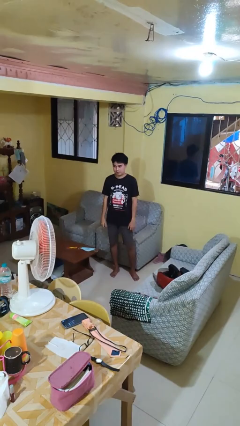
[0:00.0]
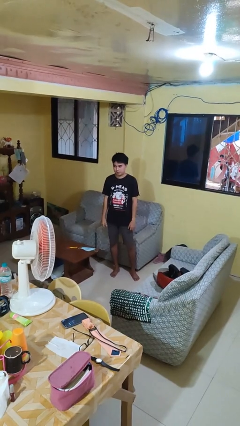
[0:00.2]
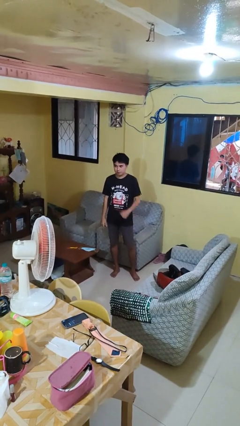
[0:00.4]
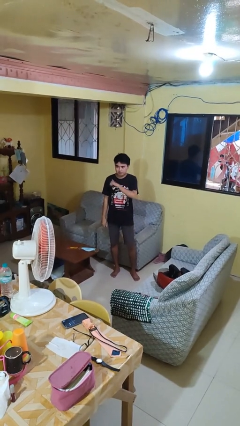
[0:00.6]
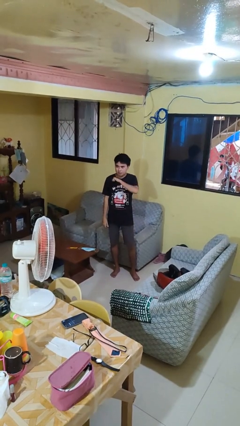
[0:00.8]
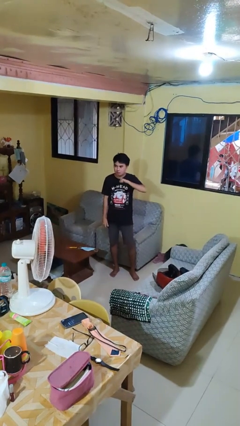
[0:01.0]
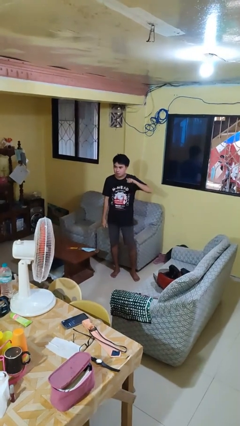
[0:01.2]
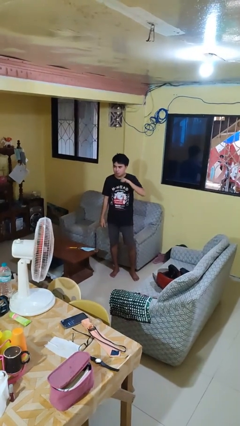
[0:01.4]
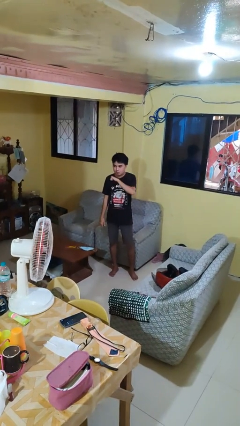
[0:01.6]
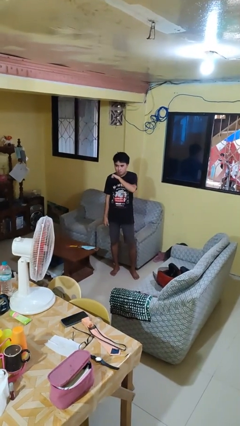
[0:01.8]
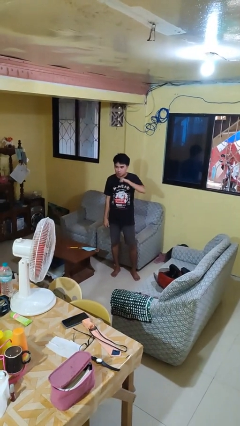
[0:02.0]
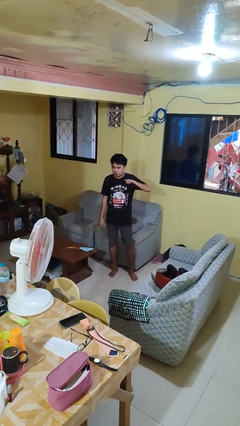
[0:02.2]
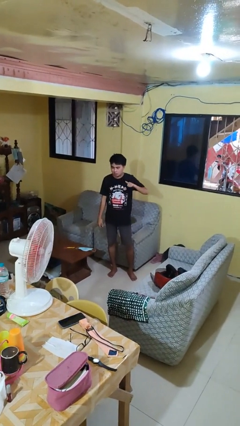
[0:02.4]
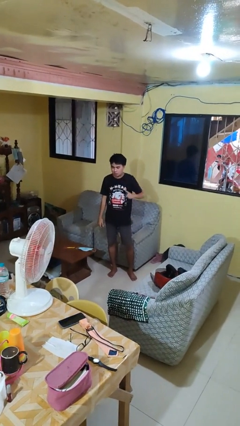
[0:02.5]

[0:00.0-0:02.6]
person gestures cut

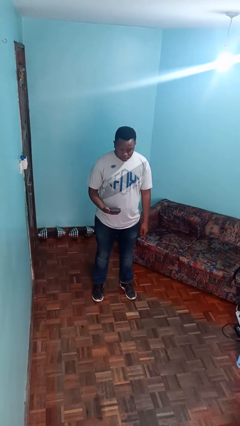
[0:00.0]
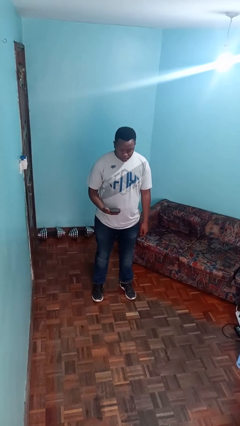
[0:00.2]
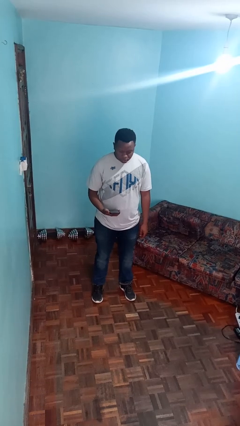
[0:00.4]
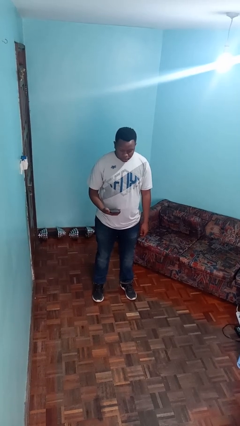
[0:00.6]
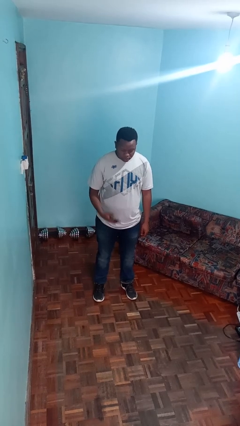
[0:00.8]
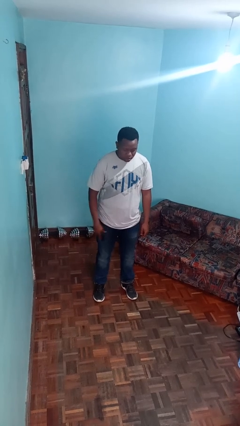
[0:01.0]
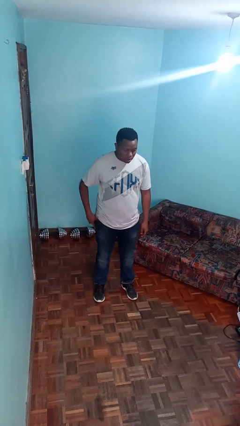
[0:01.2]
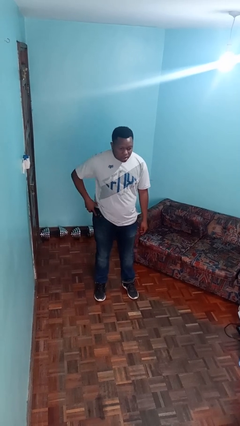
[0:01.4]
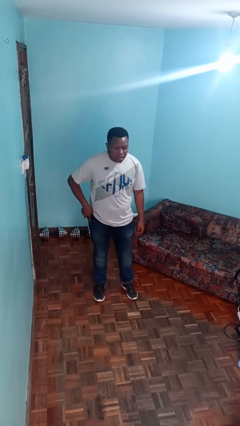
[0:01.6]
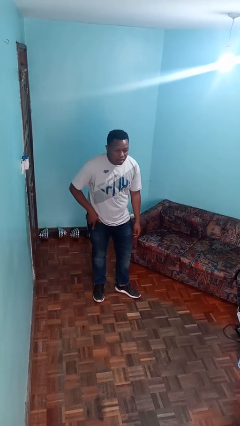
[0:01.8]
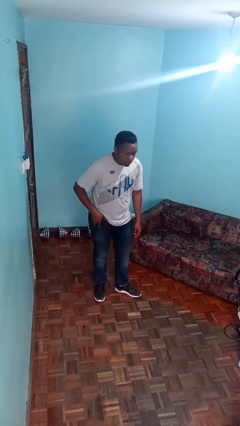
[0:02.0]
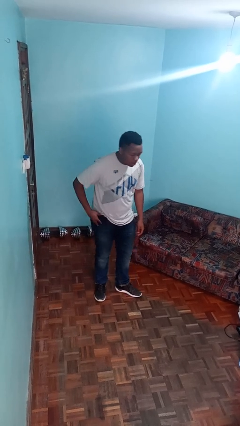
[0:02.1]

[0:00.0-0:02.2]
person puts phone into pocket

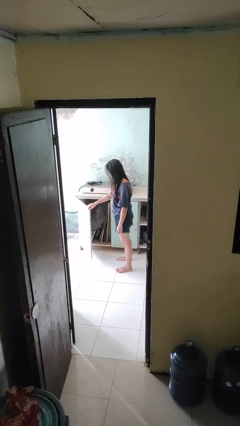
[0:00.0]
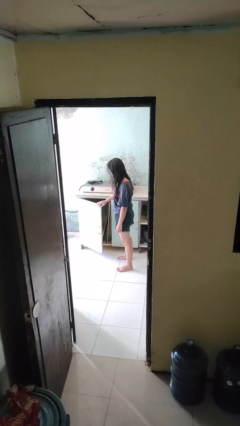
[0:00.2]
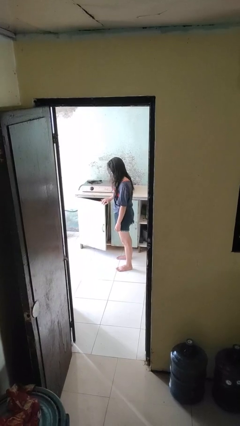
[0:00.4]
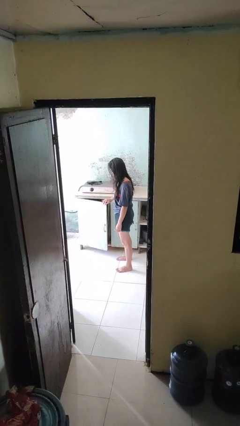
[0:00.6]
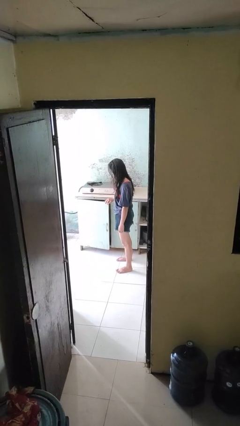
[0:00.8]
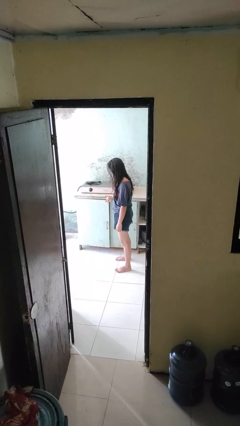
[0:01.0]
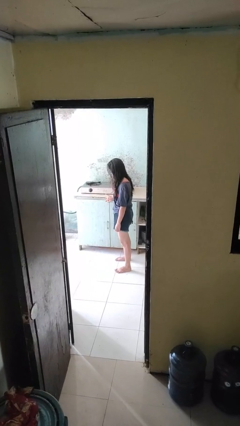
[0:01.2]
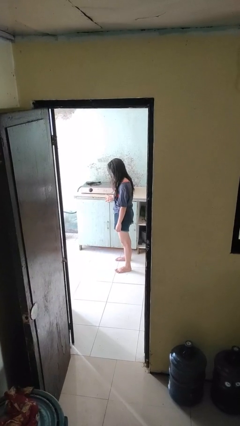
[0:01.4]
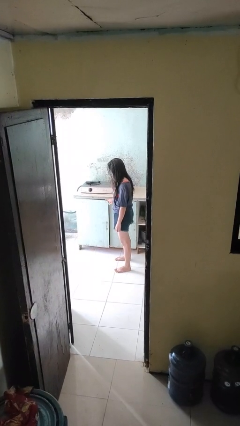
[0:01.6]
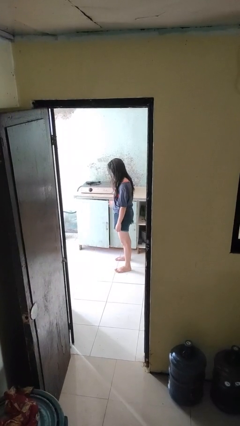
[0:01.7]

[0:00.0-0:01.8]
person closes cabinet

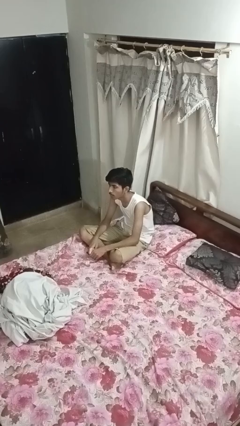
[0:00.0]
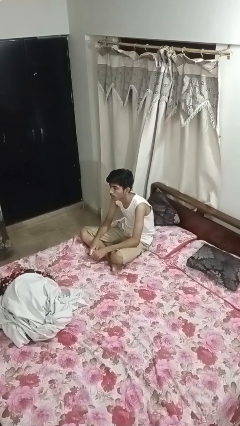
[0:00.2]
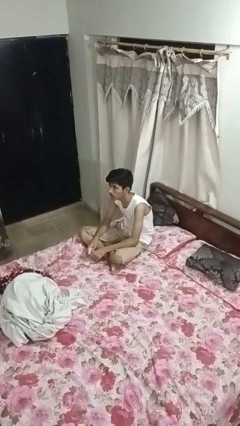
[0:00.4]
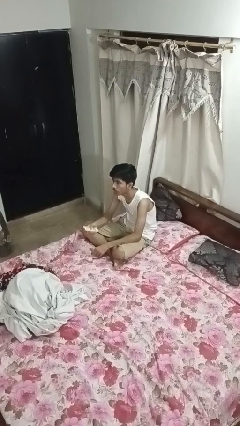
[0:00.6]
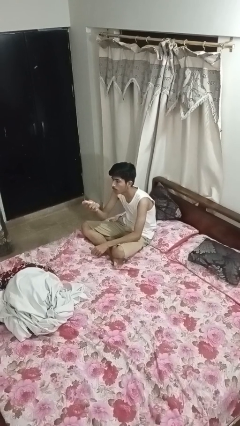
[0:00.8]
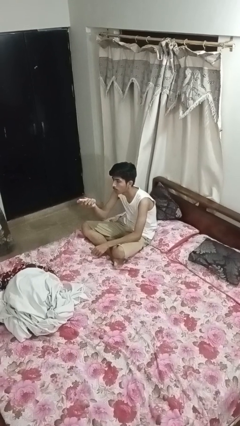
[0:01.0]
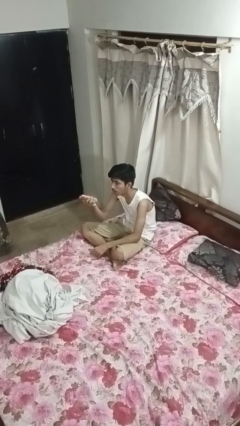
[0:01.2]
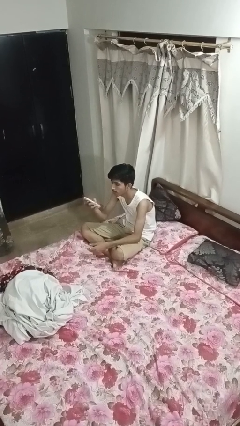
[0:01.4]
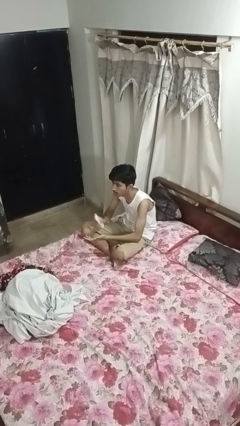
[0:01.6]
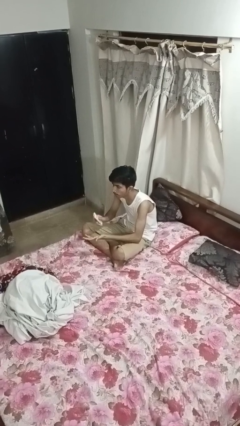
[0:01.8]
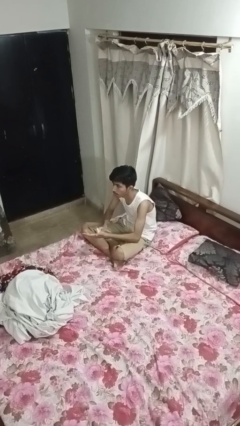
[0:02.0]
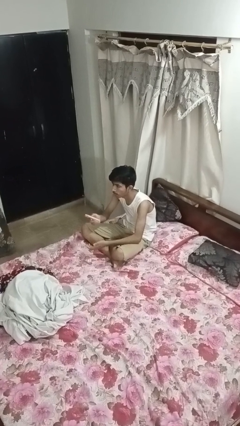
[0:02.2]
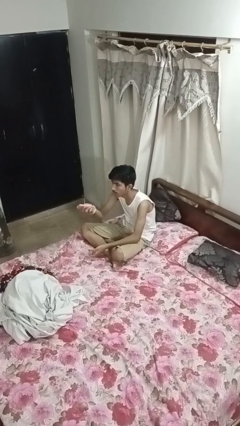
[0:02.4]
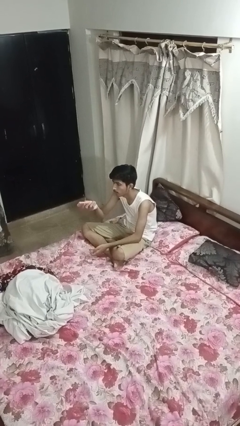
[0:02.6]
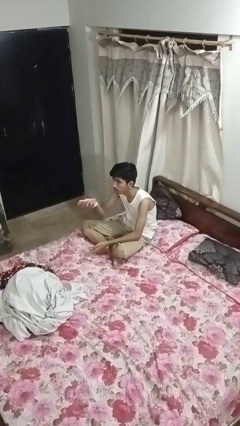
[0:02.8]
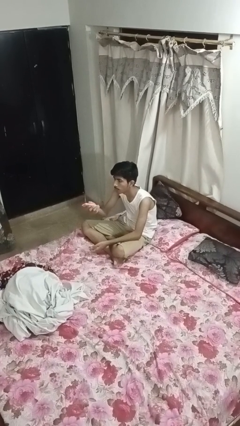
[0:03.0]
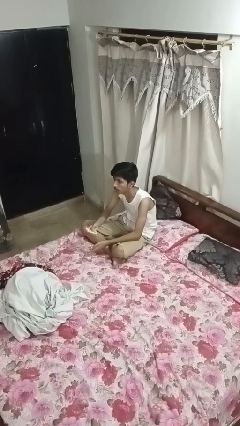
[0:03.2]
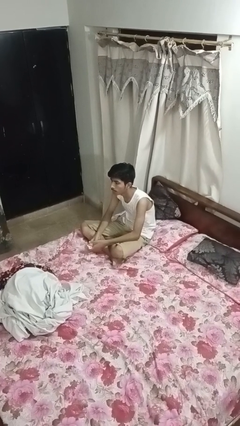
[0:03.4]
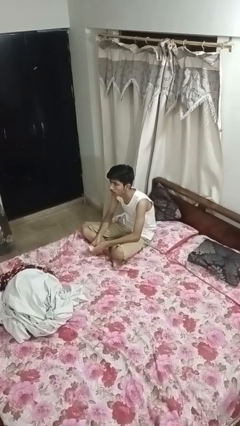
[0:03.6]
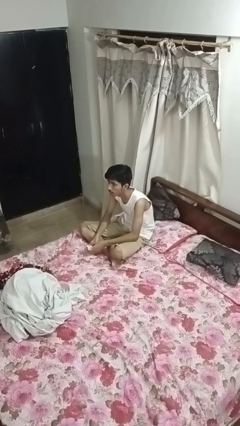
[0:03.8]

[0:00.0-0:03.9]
person uses television remote

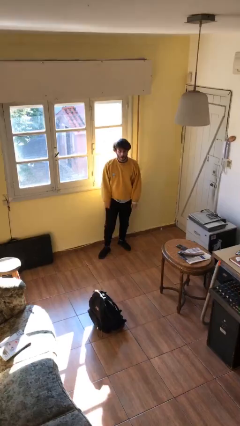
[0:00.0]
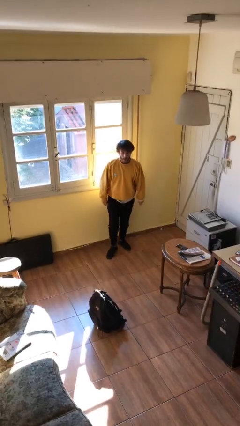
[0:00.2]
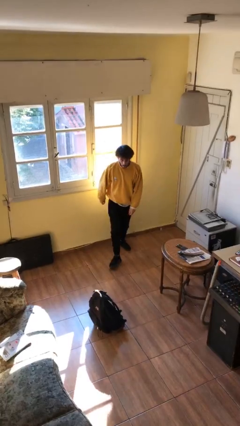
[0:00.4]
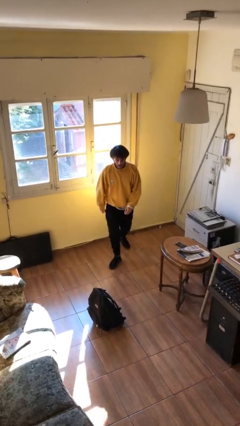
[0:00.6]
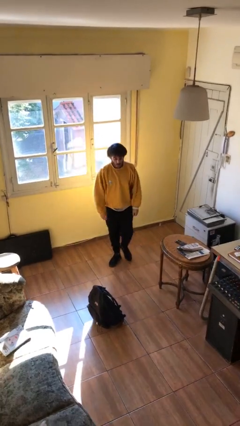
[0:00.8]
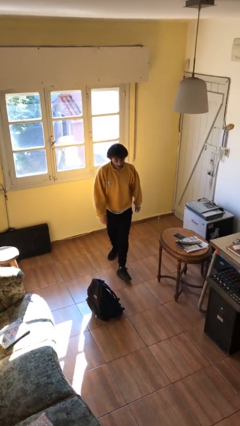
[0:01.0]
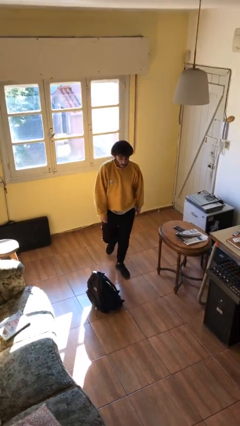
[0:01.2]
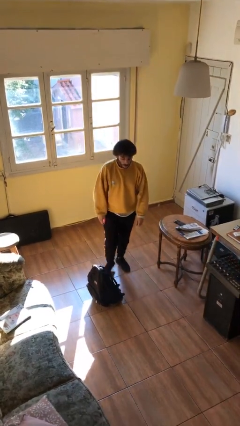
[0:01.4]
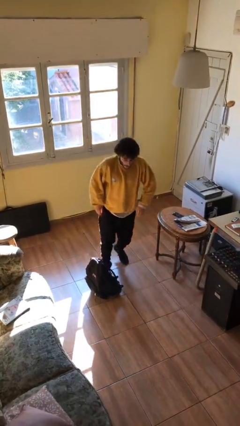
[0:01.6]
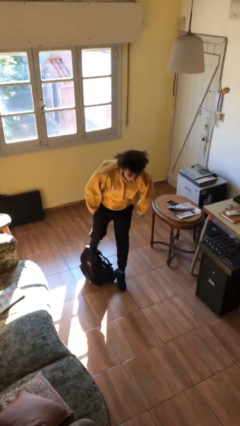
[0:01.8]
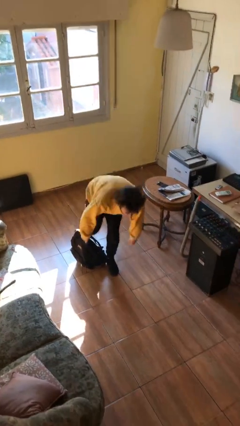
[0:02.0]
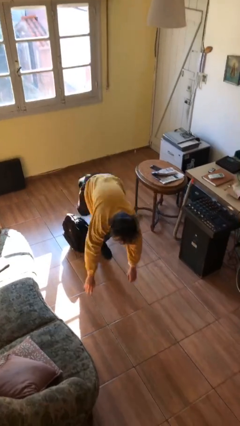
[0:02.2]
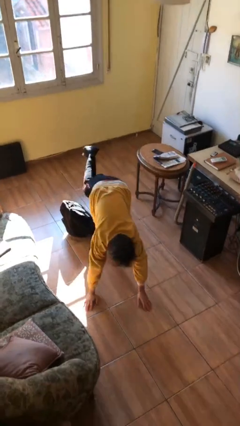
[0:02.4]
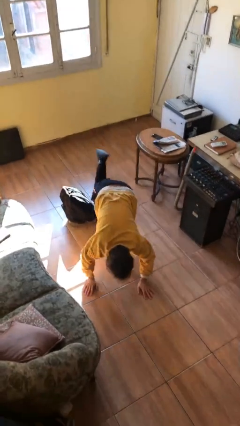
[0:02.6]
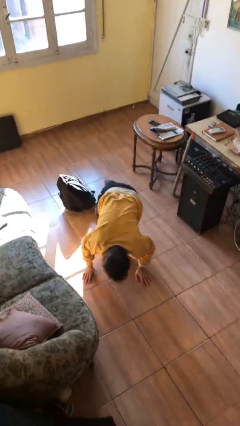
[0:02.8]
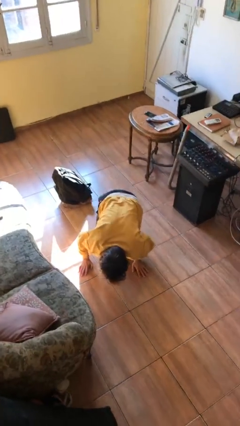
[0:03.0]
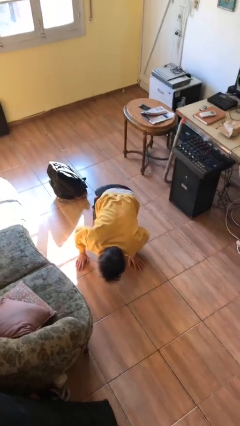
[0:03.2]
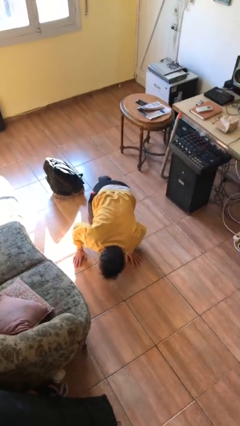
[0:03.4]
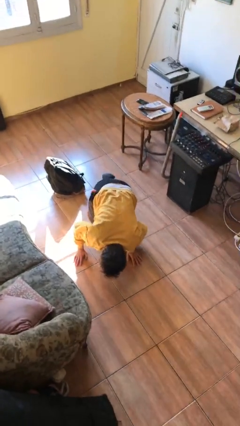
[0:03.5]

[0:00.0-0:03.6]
person trips on object on floor

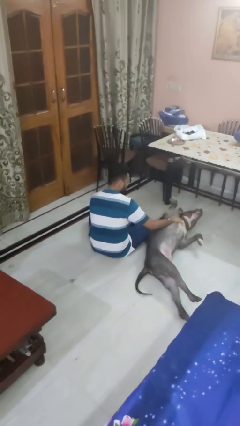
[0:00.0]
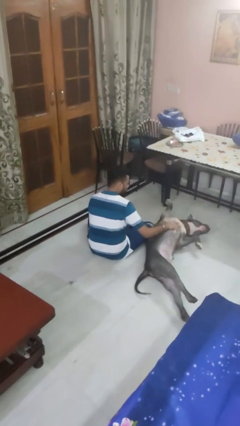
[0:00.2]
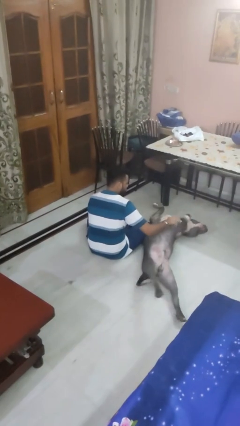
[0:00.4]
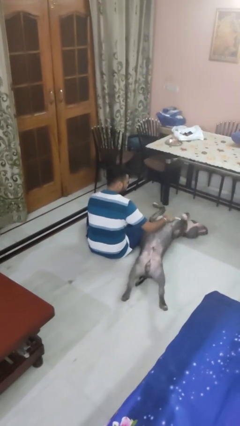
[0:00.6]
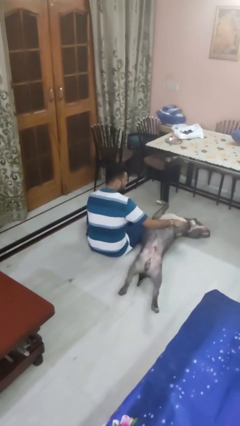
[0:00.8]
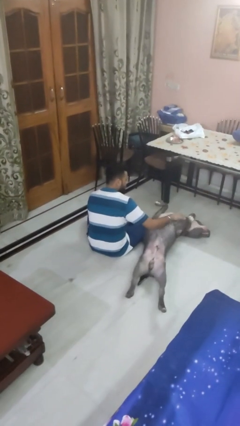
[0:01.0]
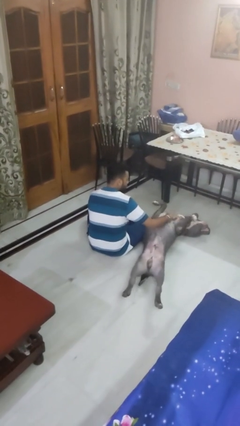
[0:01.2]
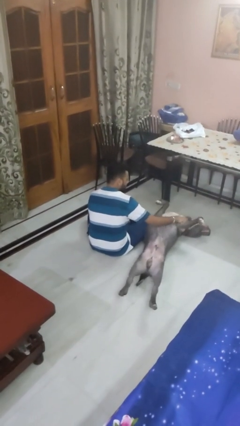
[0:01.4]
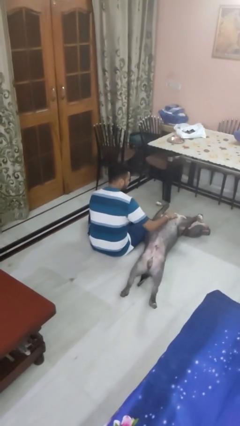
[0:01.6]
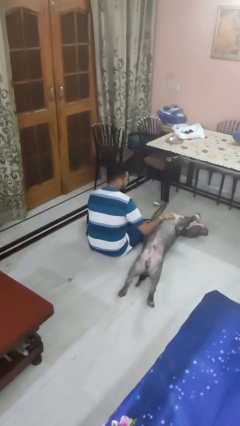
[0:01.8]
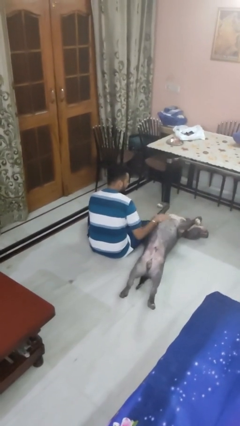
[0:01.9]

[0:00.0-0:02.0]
person pets dog

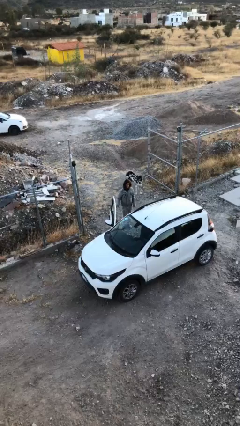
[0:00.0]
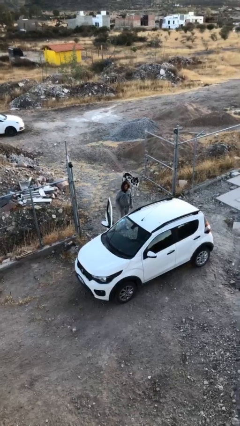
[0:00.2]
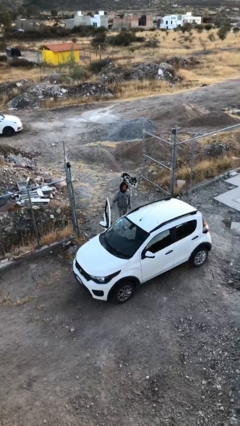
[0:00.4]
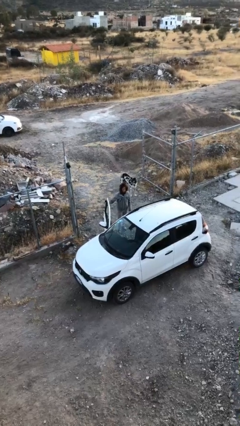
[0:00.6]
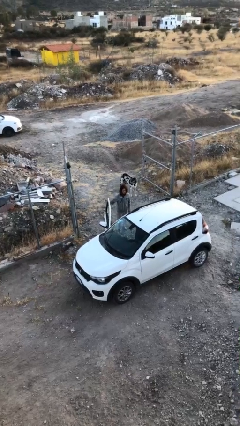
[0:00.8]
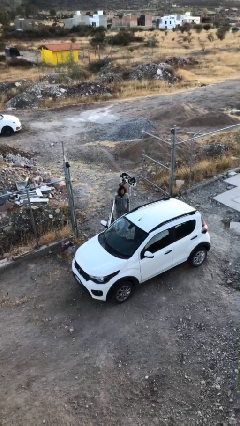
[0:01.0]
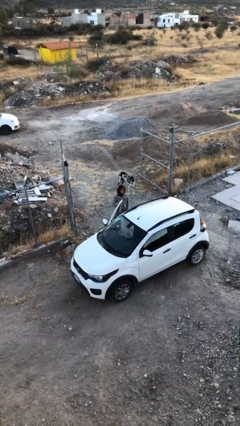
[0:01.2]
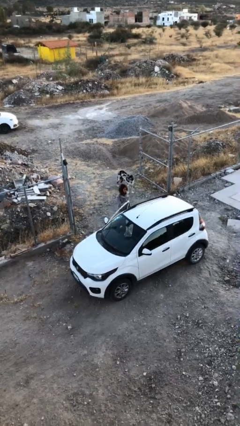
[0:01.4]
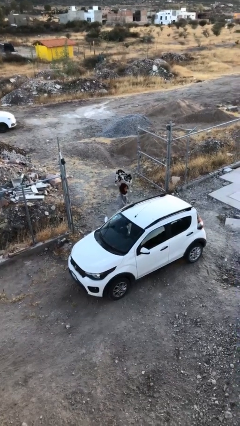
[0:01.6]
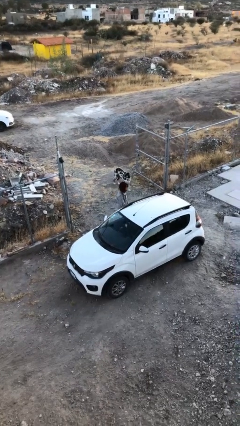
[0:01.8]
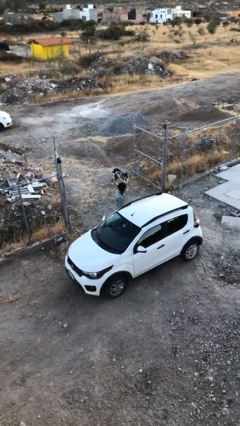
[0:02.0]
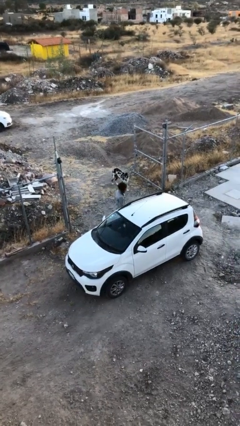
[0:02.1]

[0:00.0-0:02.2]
person closes car door
